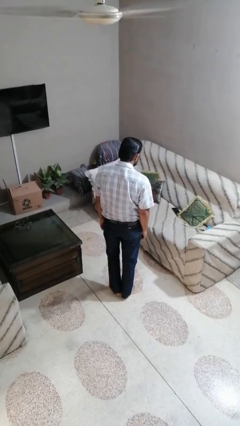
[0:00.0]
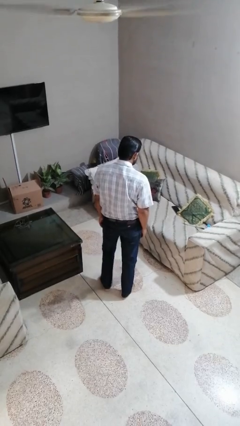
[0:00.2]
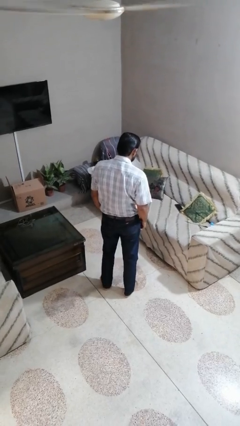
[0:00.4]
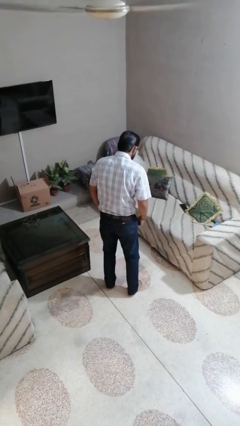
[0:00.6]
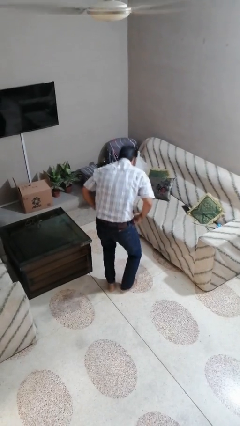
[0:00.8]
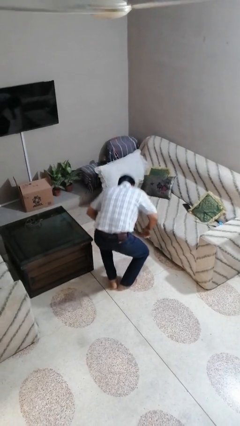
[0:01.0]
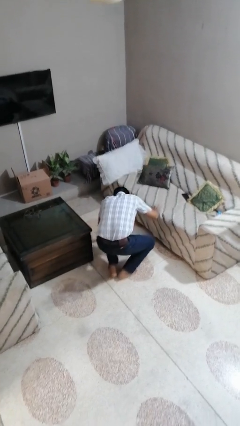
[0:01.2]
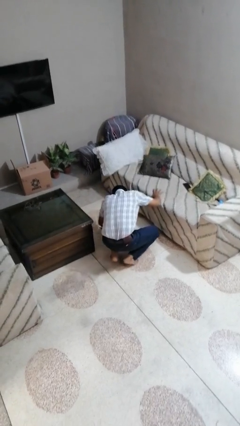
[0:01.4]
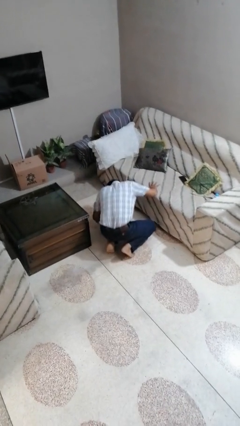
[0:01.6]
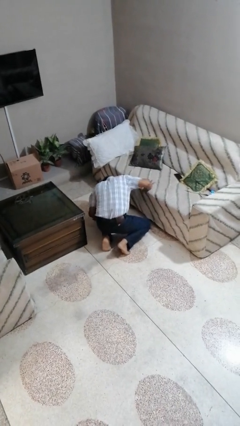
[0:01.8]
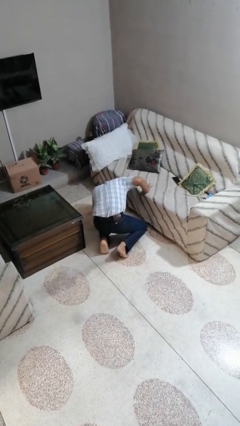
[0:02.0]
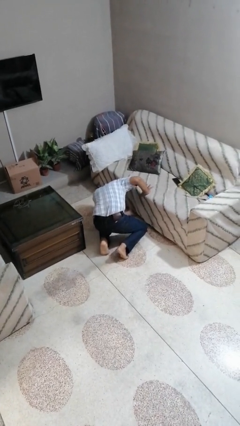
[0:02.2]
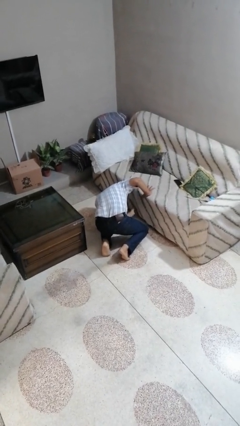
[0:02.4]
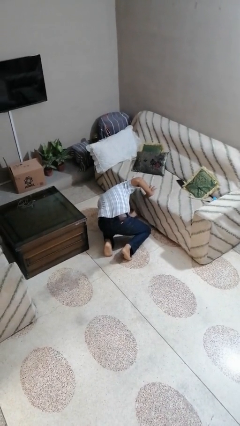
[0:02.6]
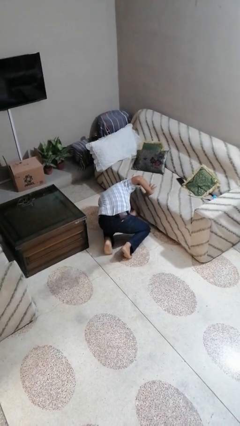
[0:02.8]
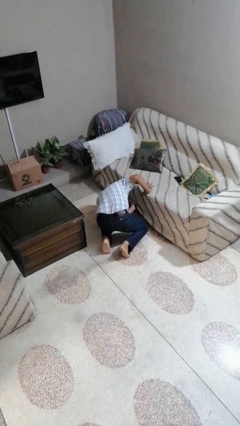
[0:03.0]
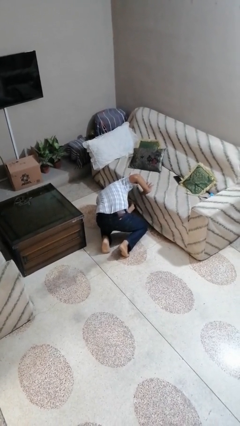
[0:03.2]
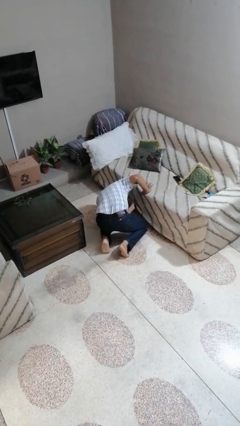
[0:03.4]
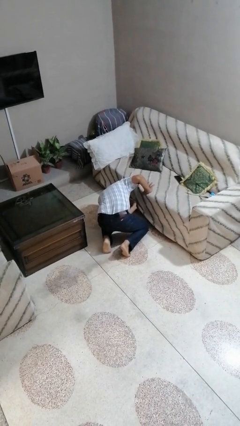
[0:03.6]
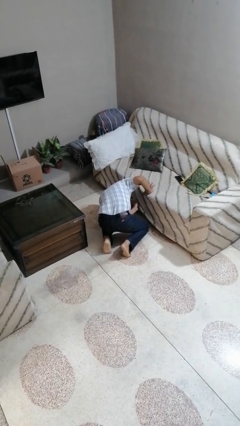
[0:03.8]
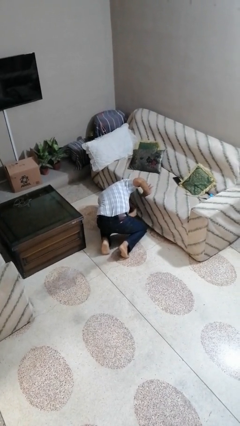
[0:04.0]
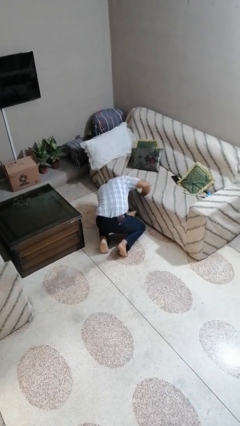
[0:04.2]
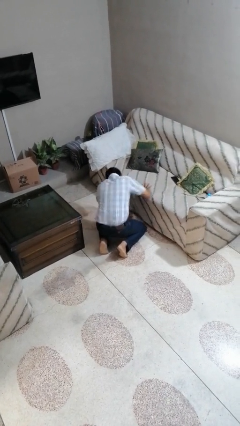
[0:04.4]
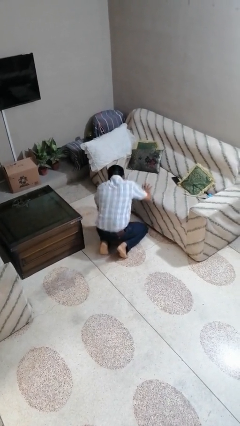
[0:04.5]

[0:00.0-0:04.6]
person searches under couch

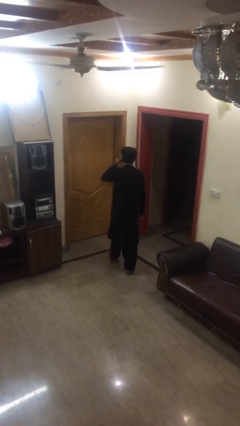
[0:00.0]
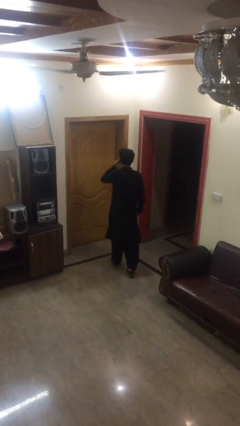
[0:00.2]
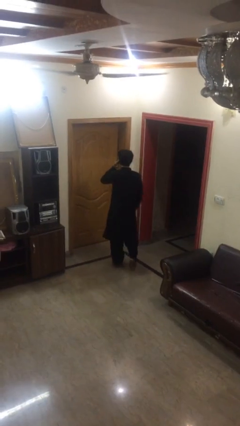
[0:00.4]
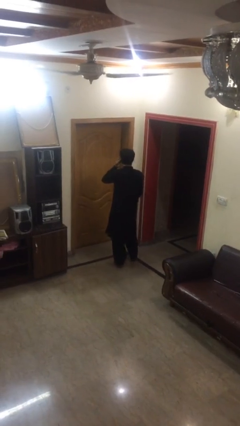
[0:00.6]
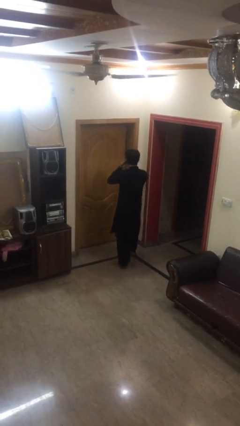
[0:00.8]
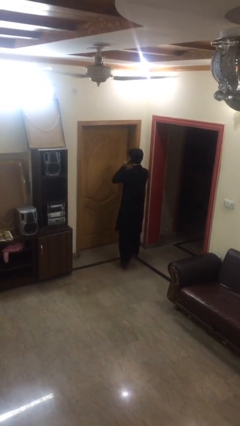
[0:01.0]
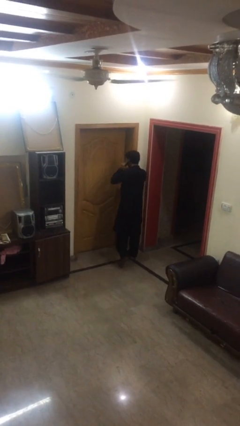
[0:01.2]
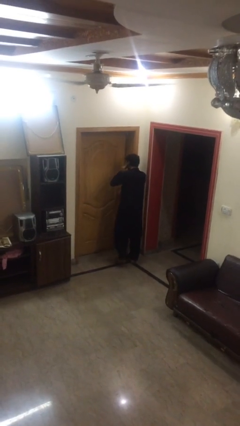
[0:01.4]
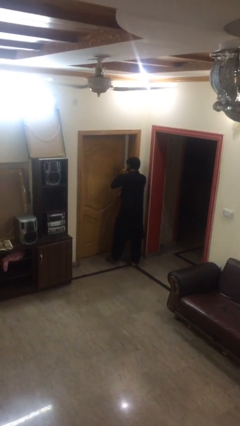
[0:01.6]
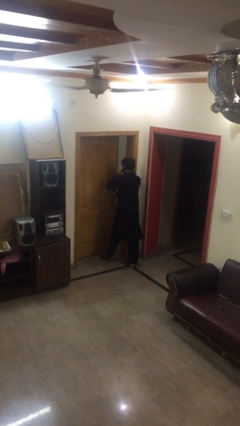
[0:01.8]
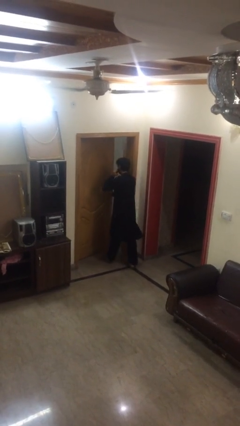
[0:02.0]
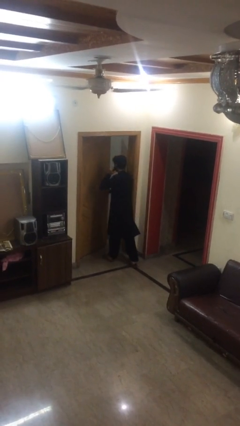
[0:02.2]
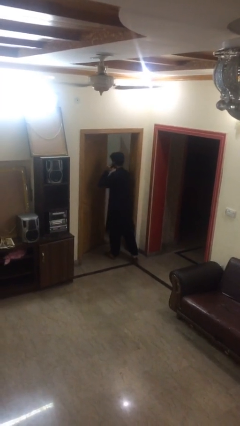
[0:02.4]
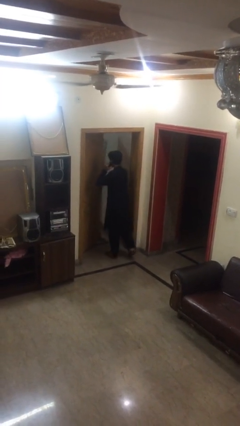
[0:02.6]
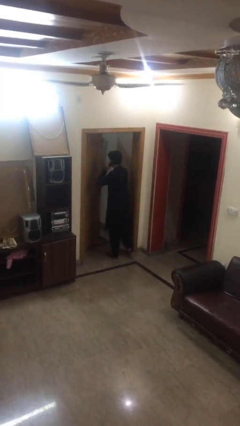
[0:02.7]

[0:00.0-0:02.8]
person opens facility door

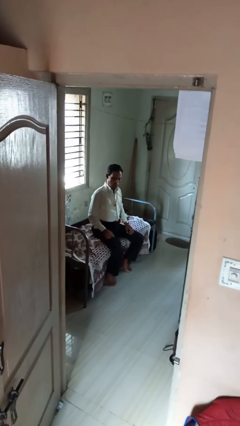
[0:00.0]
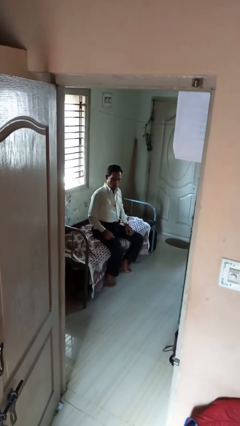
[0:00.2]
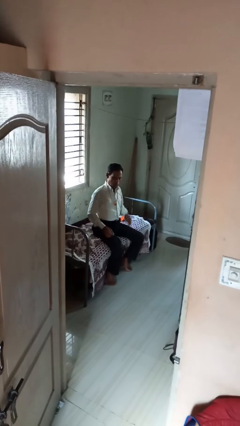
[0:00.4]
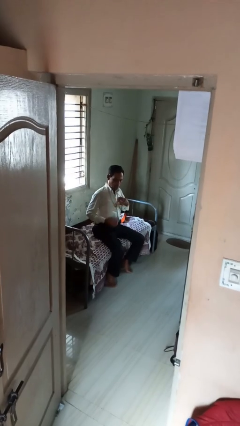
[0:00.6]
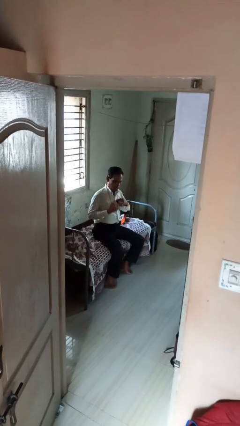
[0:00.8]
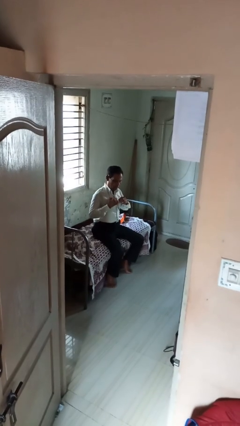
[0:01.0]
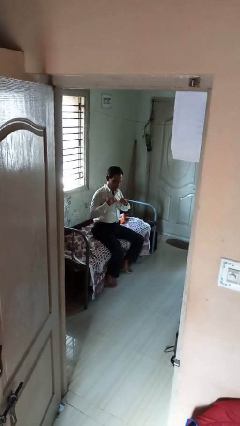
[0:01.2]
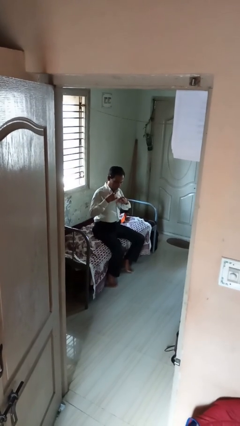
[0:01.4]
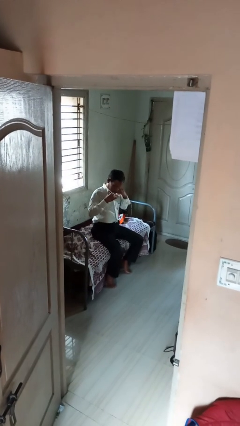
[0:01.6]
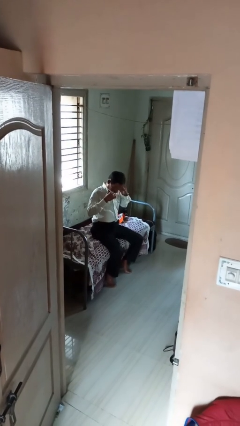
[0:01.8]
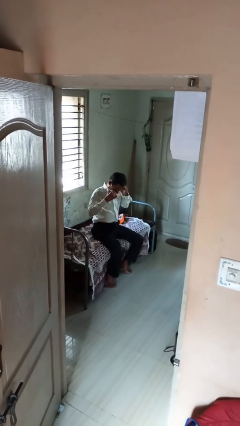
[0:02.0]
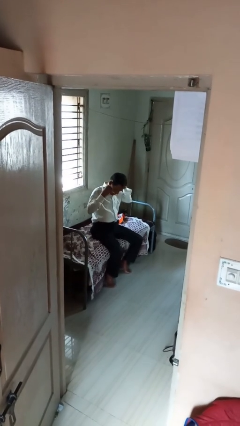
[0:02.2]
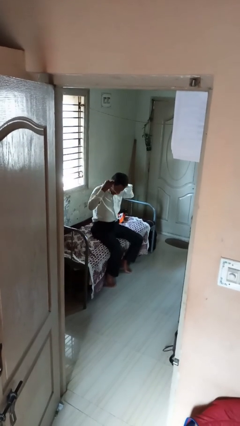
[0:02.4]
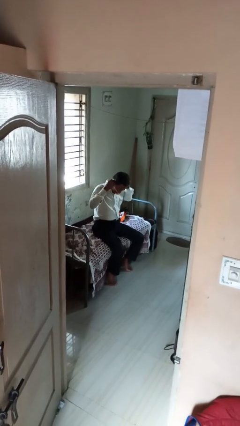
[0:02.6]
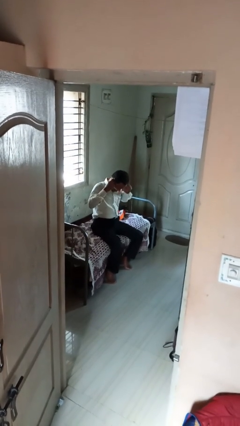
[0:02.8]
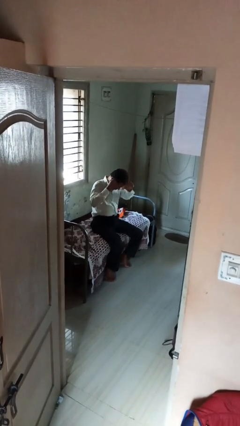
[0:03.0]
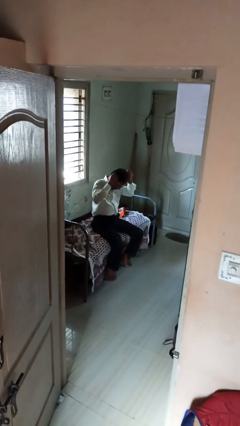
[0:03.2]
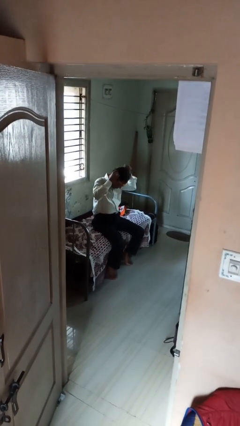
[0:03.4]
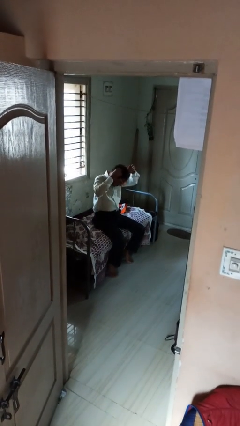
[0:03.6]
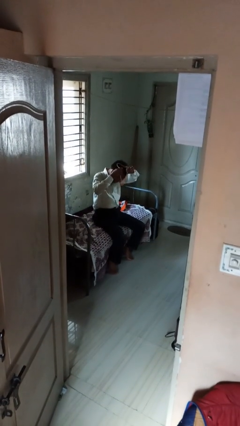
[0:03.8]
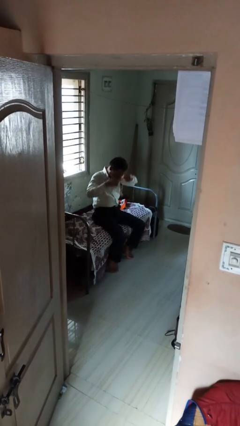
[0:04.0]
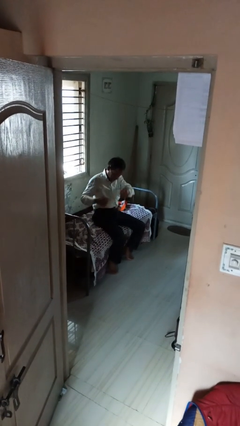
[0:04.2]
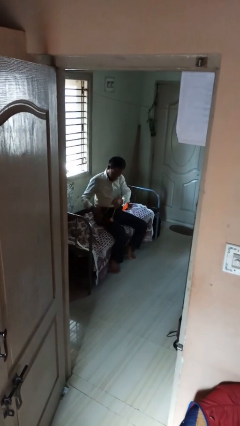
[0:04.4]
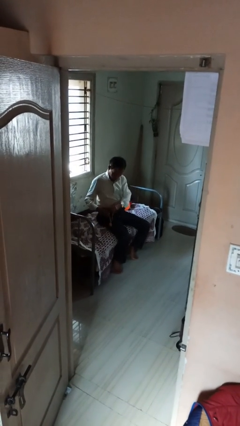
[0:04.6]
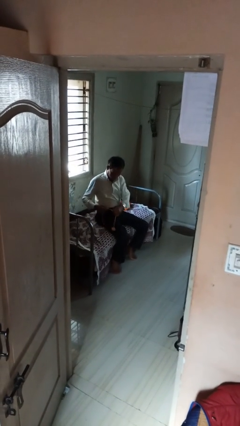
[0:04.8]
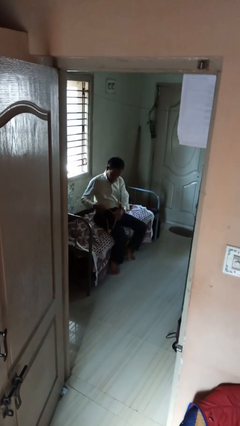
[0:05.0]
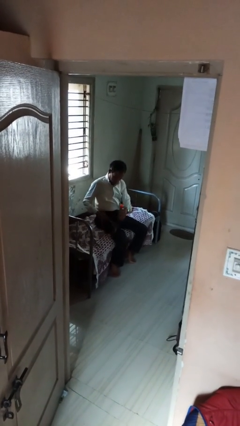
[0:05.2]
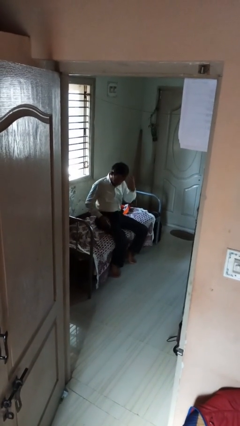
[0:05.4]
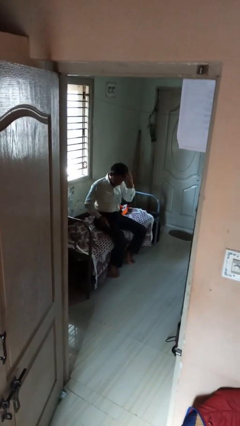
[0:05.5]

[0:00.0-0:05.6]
person takes off necklace

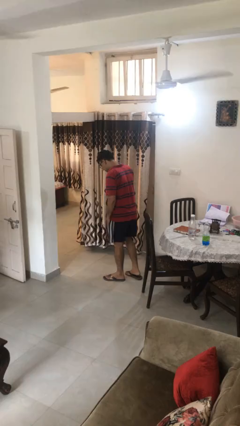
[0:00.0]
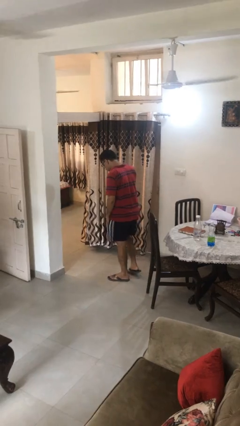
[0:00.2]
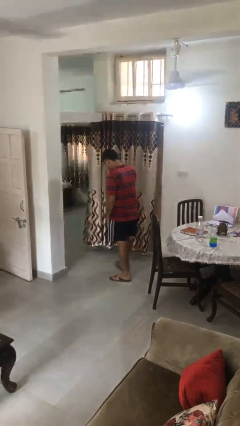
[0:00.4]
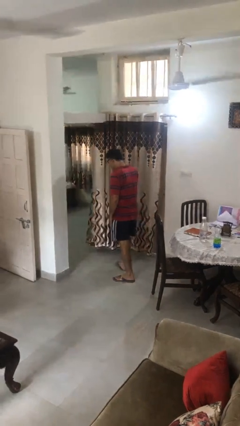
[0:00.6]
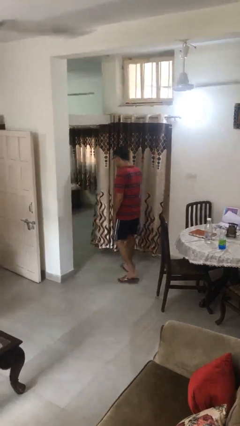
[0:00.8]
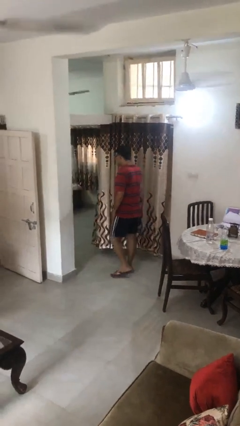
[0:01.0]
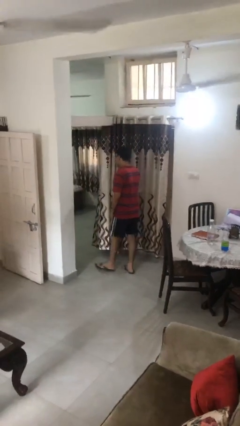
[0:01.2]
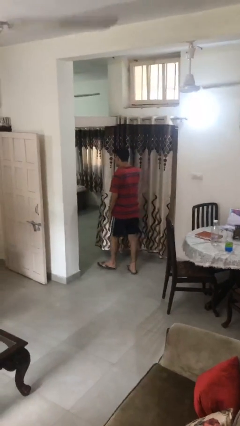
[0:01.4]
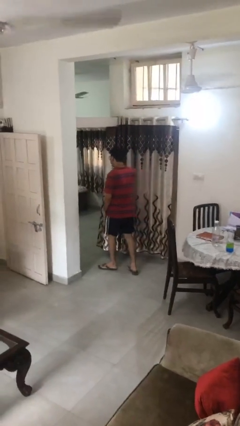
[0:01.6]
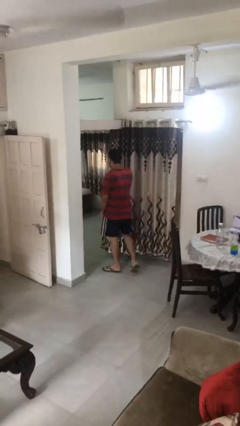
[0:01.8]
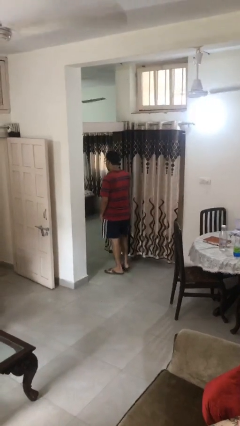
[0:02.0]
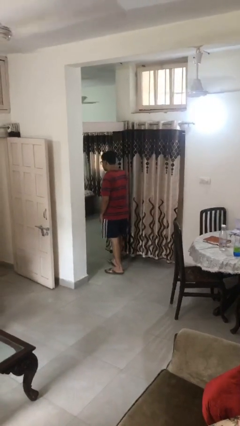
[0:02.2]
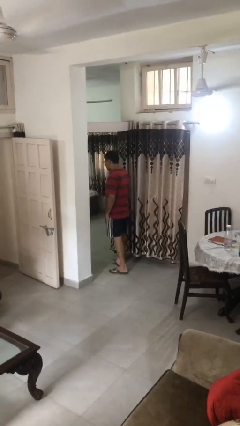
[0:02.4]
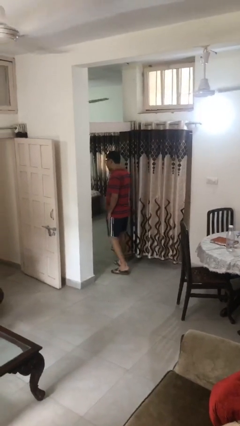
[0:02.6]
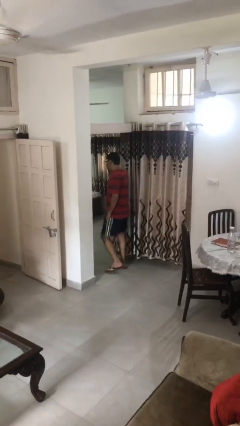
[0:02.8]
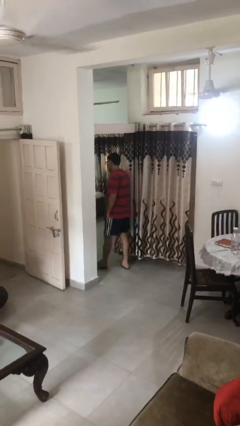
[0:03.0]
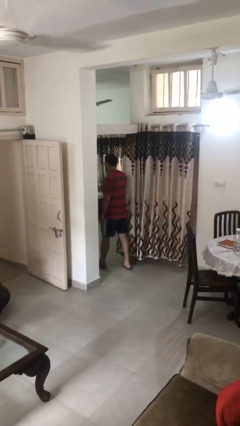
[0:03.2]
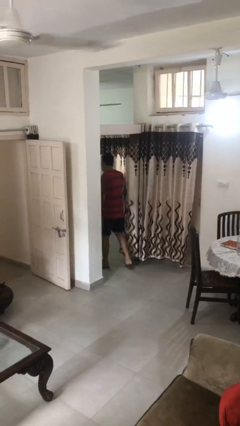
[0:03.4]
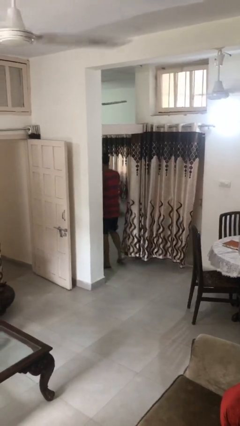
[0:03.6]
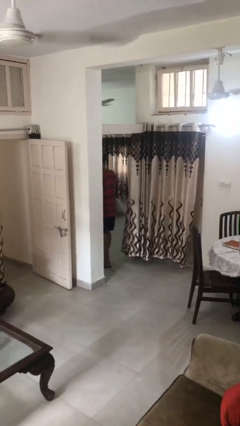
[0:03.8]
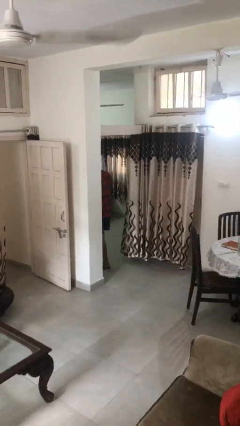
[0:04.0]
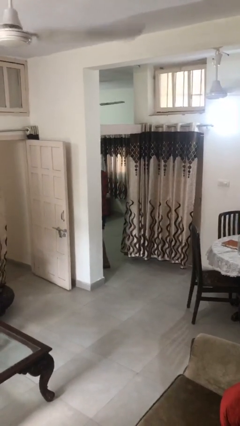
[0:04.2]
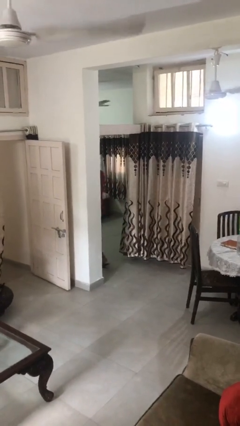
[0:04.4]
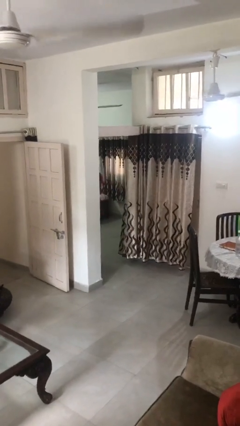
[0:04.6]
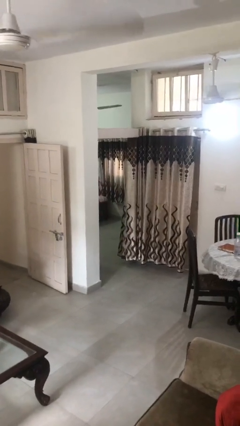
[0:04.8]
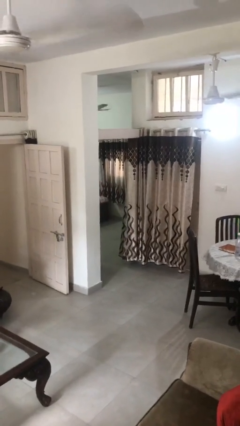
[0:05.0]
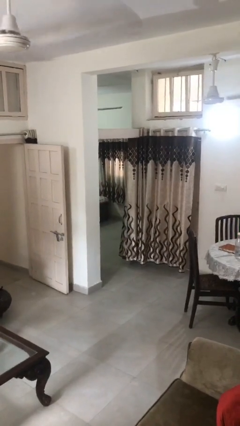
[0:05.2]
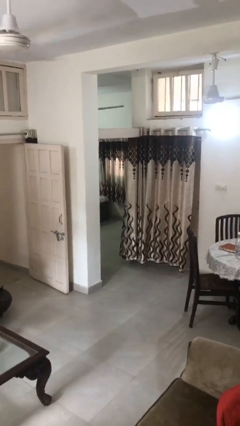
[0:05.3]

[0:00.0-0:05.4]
person exits scene through structure
